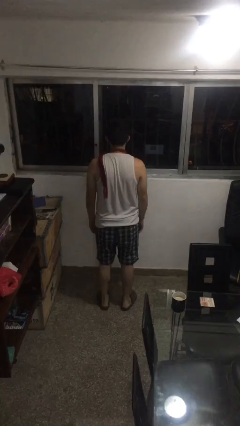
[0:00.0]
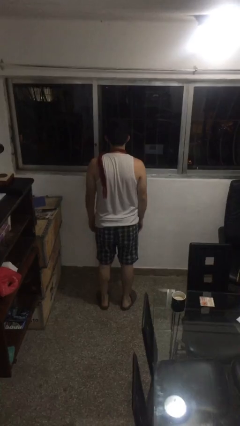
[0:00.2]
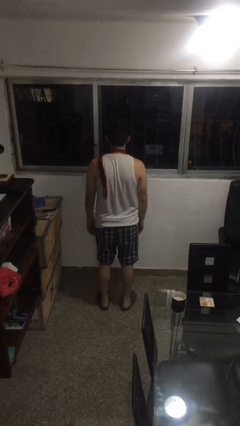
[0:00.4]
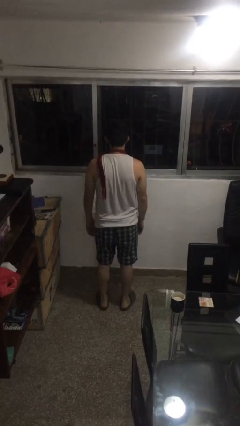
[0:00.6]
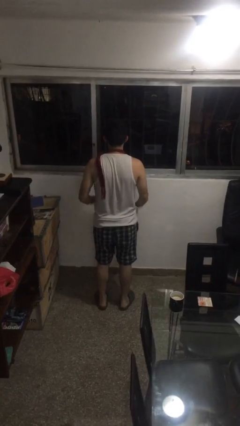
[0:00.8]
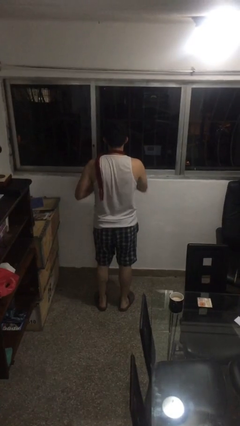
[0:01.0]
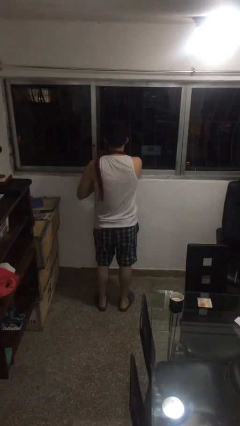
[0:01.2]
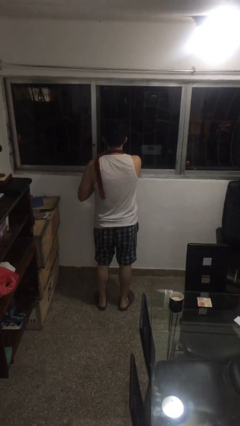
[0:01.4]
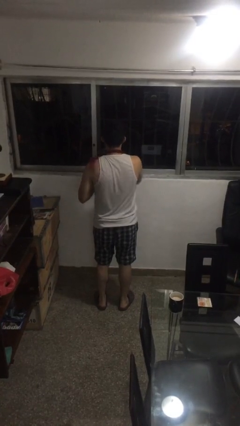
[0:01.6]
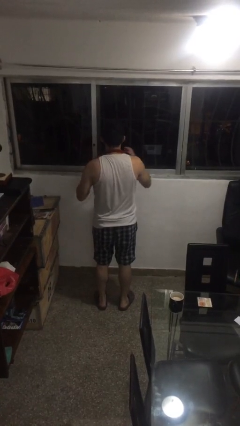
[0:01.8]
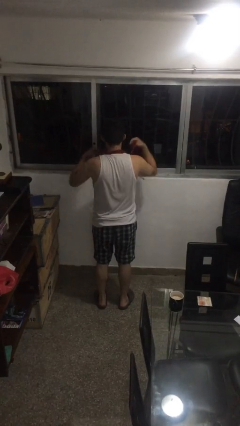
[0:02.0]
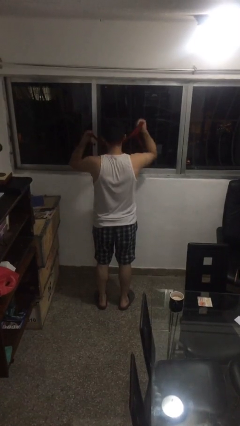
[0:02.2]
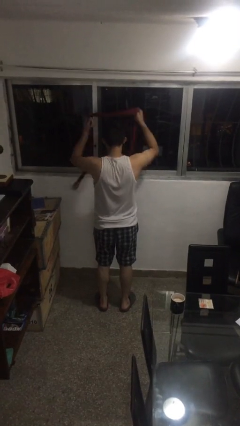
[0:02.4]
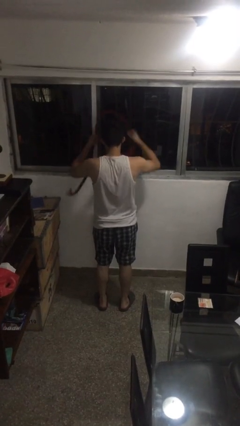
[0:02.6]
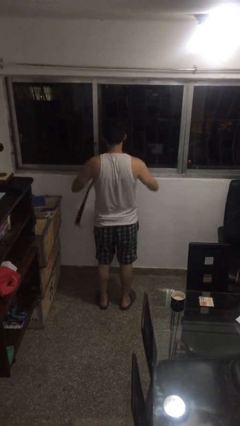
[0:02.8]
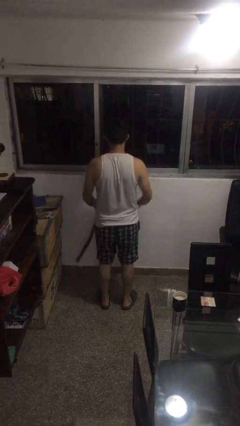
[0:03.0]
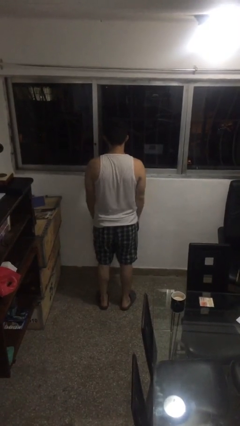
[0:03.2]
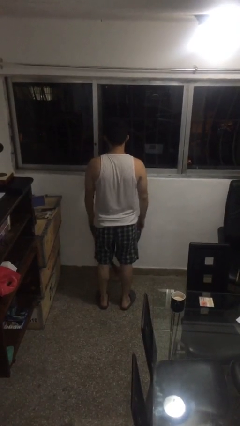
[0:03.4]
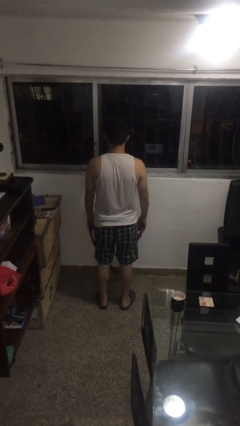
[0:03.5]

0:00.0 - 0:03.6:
person takes off scarf

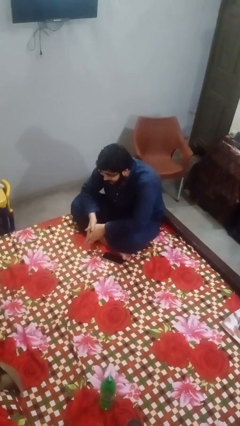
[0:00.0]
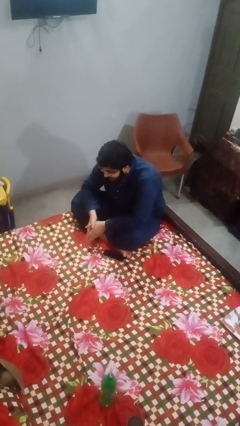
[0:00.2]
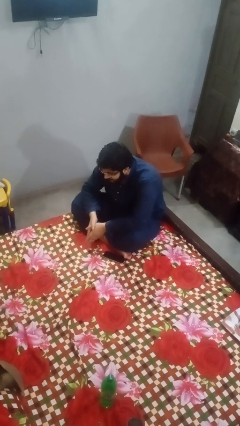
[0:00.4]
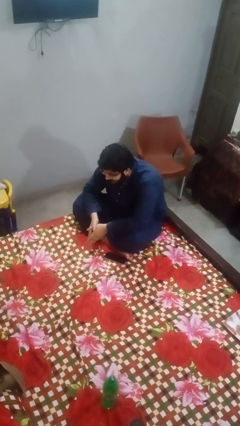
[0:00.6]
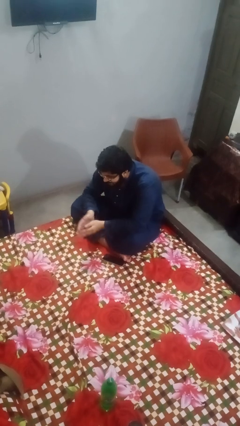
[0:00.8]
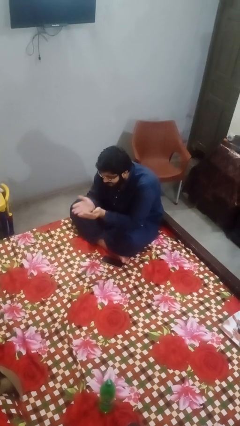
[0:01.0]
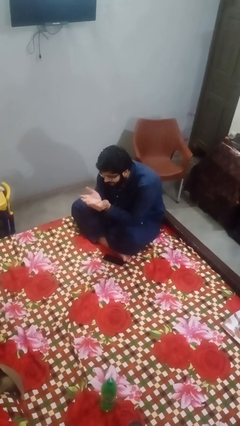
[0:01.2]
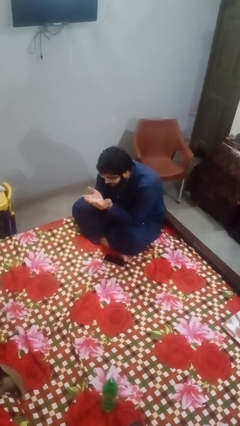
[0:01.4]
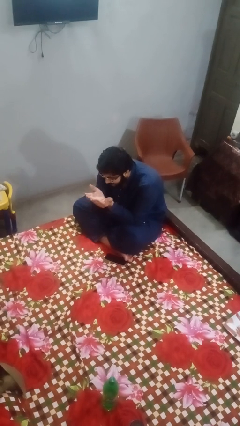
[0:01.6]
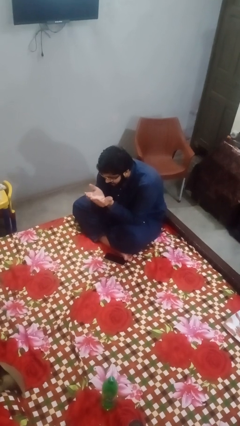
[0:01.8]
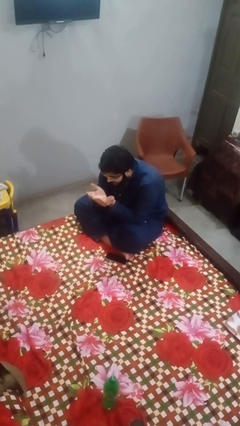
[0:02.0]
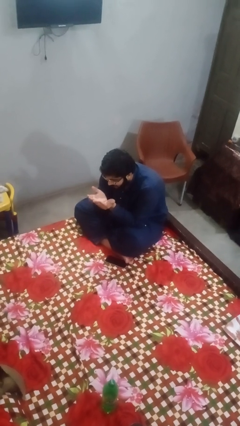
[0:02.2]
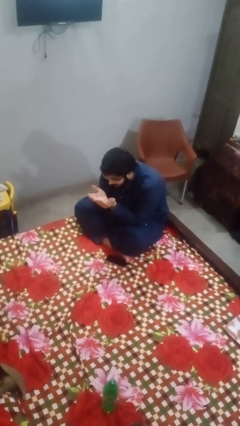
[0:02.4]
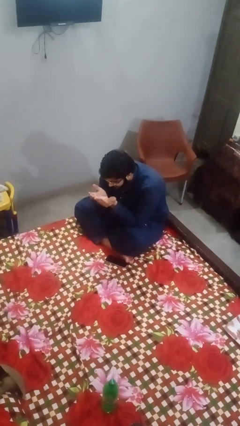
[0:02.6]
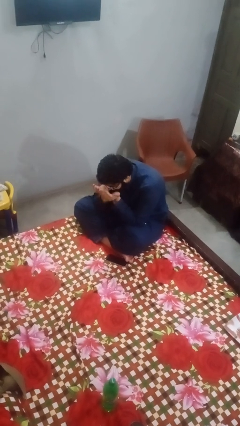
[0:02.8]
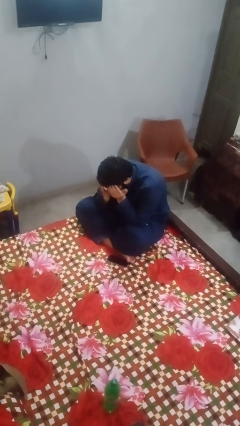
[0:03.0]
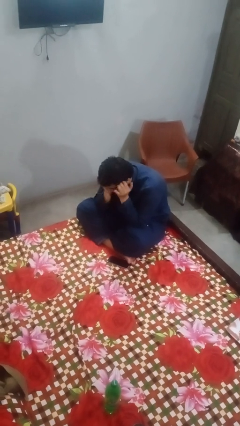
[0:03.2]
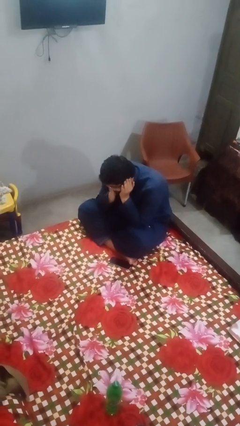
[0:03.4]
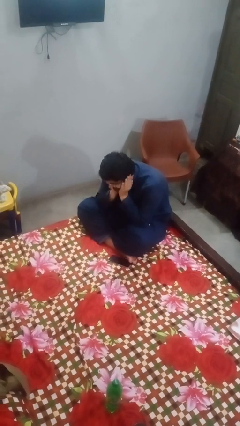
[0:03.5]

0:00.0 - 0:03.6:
person prays

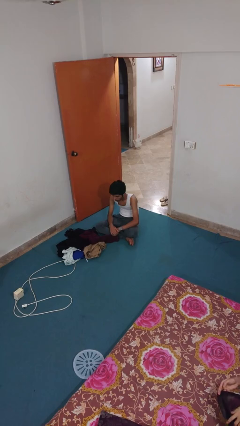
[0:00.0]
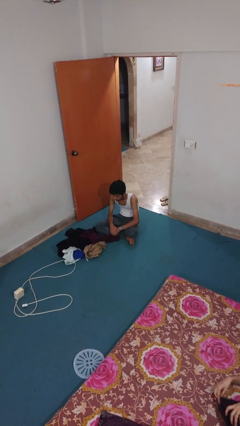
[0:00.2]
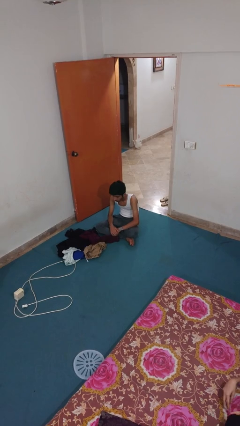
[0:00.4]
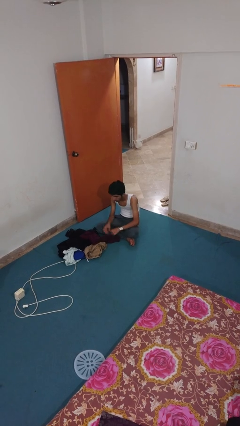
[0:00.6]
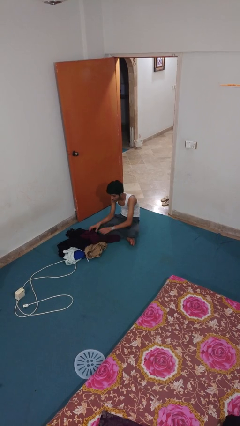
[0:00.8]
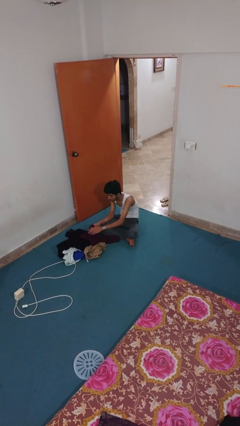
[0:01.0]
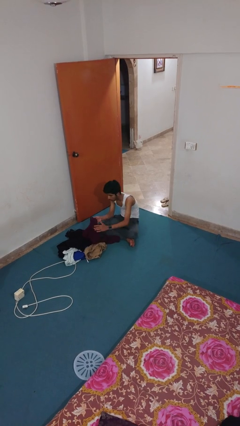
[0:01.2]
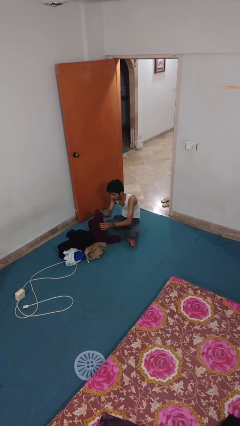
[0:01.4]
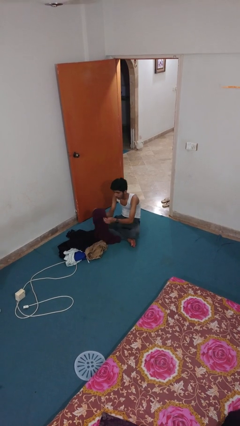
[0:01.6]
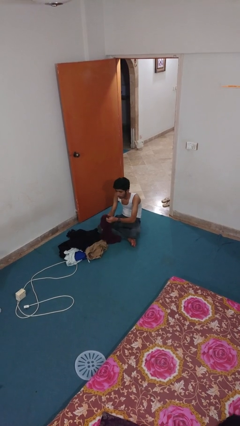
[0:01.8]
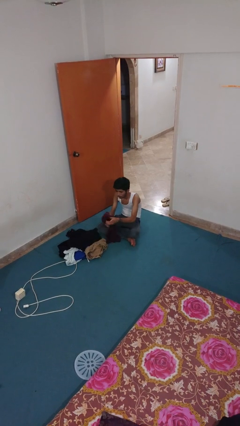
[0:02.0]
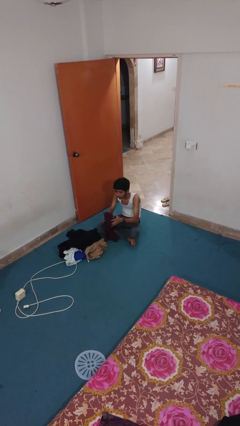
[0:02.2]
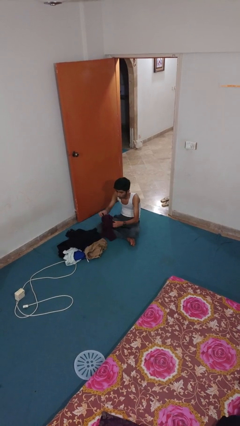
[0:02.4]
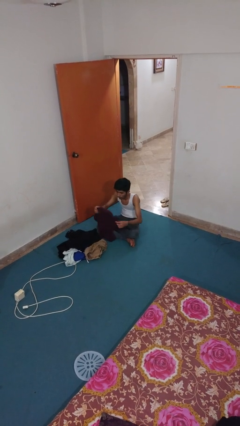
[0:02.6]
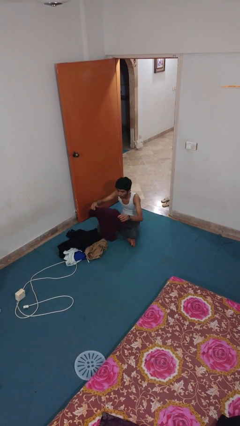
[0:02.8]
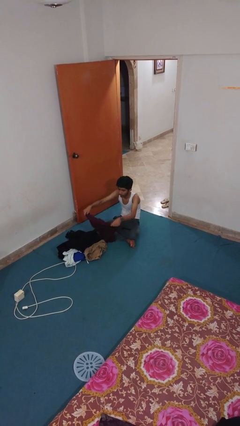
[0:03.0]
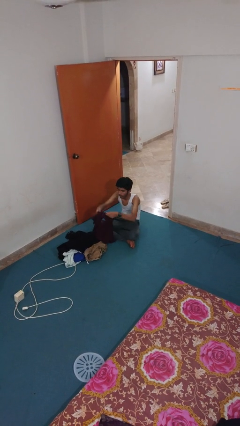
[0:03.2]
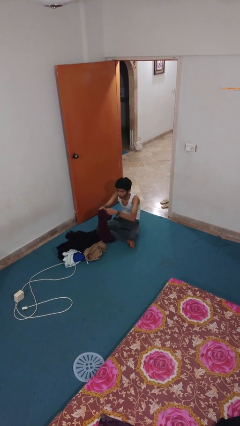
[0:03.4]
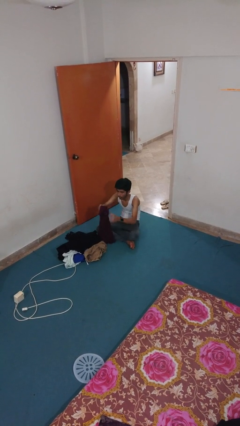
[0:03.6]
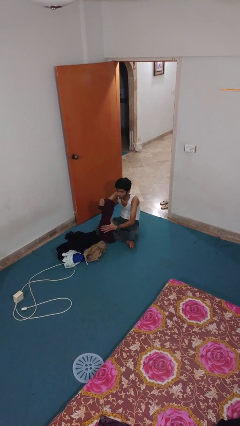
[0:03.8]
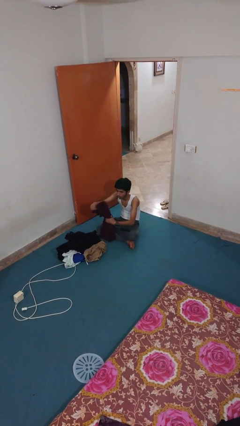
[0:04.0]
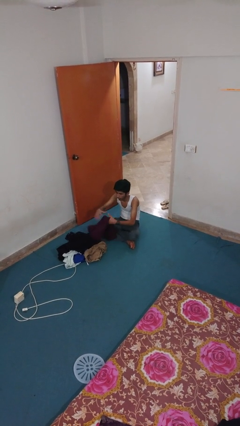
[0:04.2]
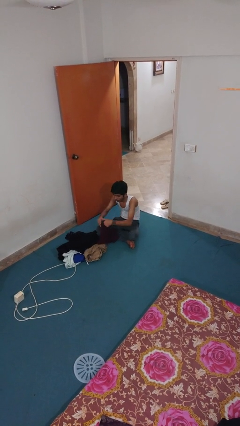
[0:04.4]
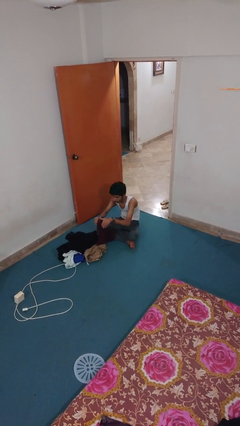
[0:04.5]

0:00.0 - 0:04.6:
person folds shirt

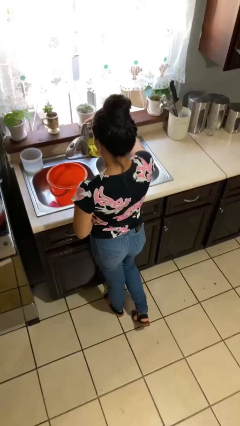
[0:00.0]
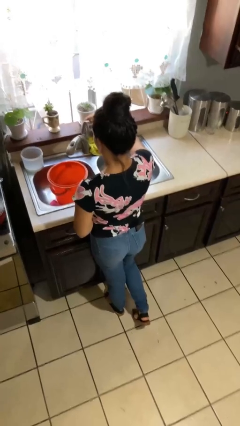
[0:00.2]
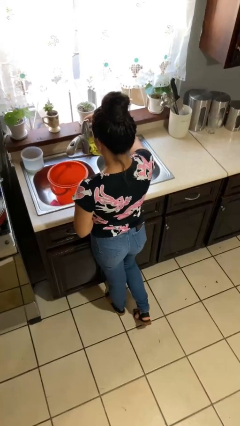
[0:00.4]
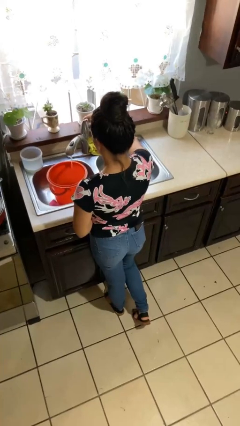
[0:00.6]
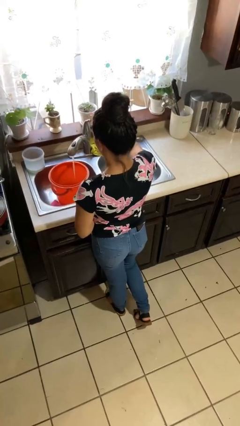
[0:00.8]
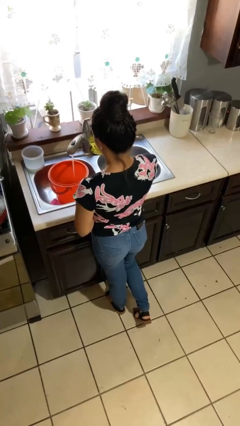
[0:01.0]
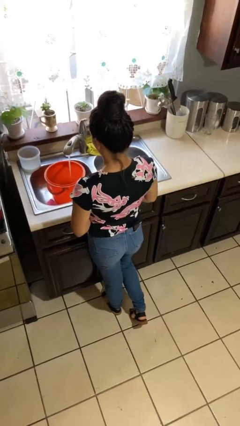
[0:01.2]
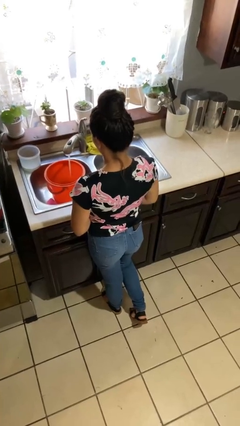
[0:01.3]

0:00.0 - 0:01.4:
person turns on faucet

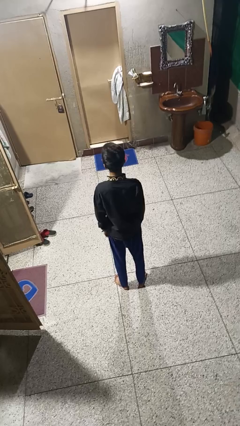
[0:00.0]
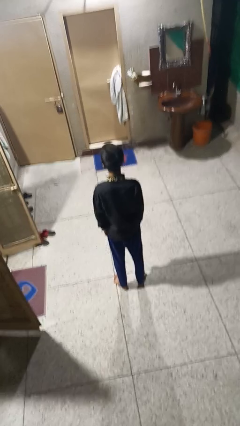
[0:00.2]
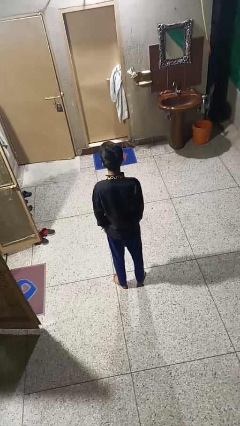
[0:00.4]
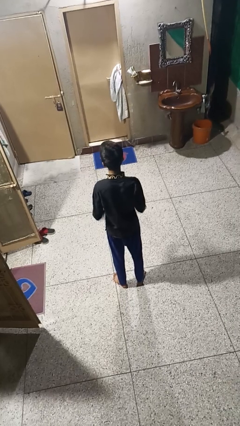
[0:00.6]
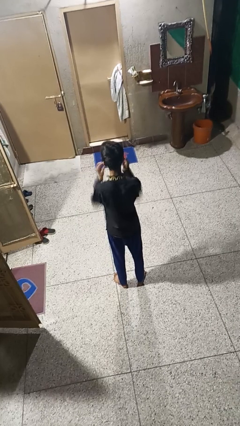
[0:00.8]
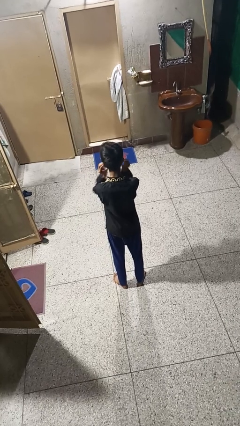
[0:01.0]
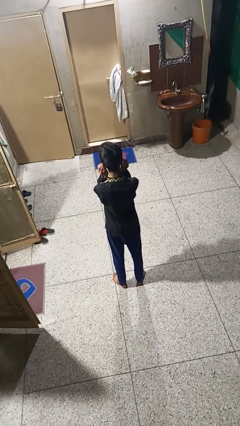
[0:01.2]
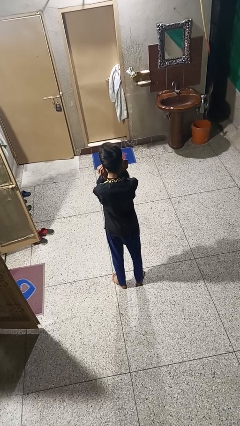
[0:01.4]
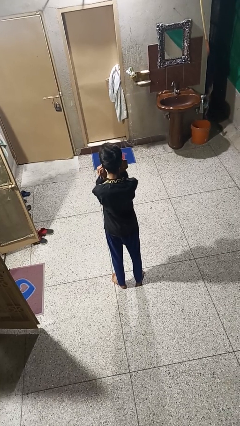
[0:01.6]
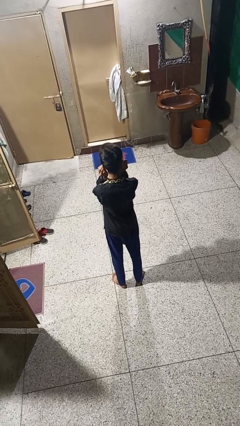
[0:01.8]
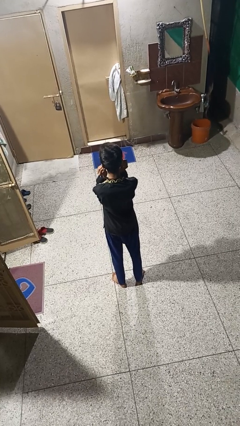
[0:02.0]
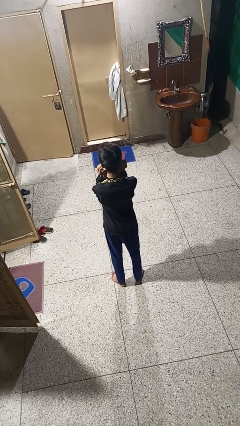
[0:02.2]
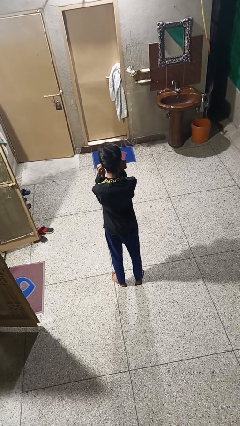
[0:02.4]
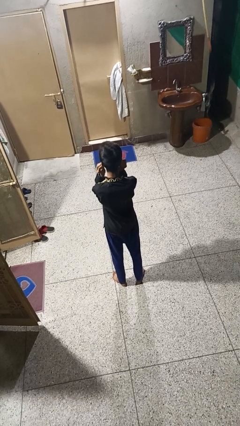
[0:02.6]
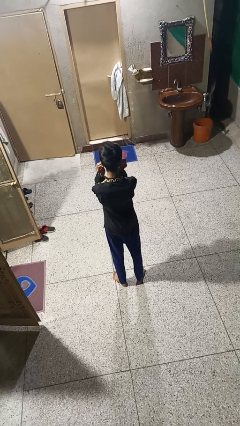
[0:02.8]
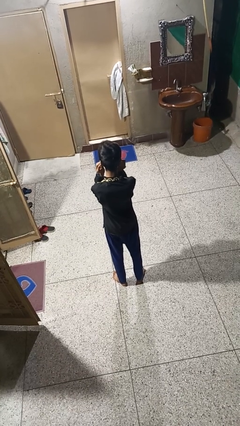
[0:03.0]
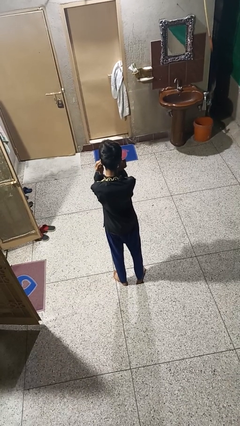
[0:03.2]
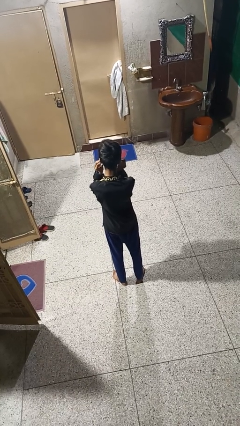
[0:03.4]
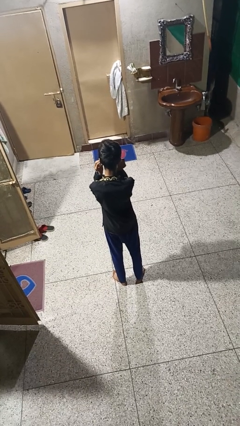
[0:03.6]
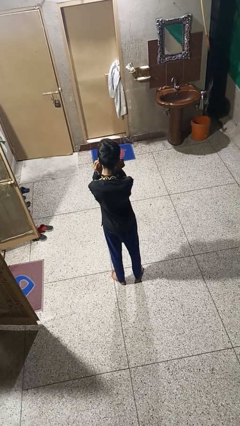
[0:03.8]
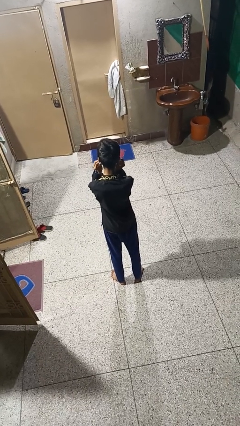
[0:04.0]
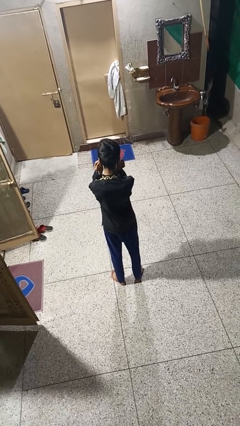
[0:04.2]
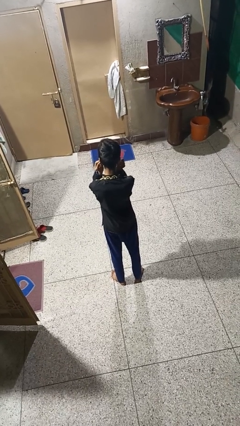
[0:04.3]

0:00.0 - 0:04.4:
person touches earlobe
